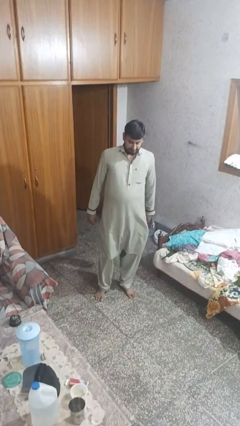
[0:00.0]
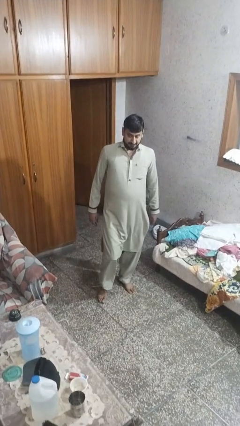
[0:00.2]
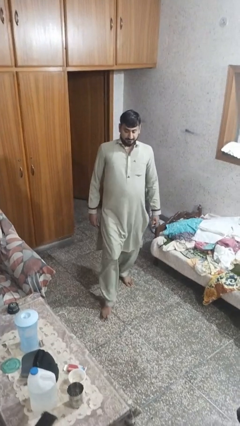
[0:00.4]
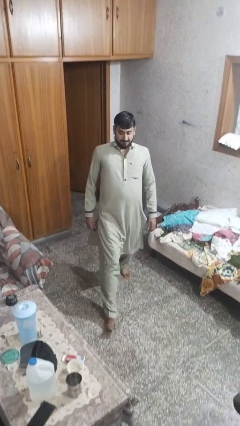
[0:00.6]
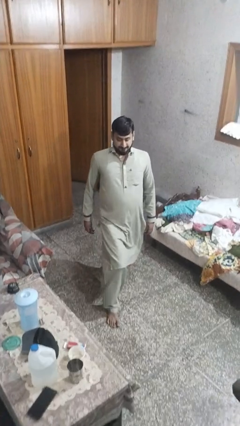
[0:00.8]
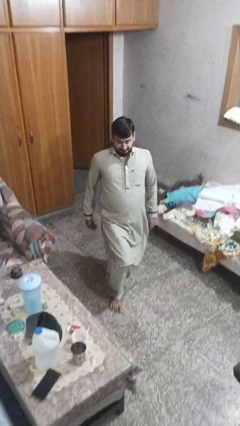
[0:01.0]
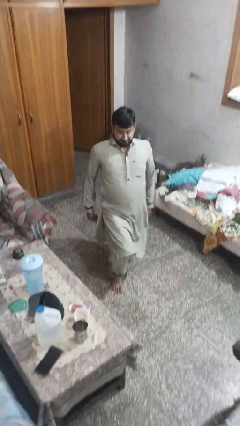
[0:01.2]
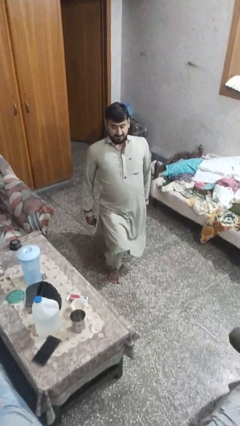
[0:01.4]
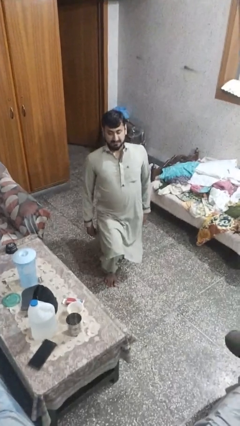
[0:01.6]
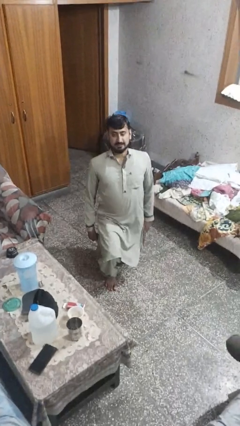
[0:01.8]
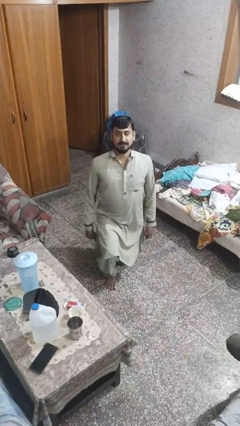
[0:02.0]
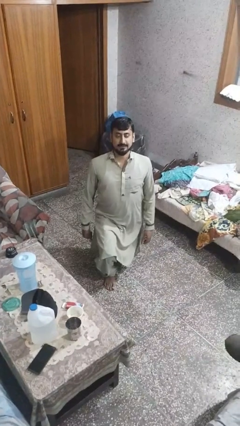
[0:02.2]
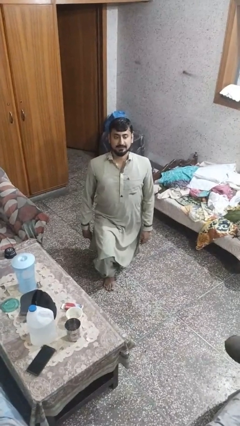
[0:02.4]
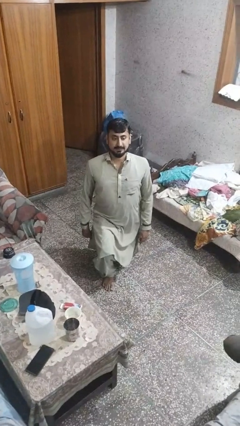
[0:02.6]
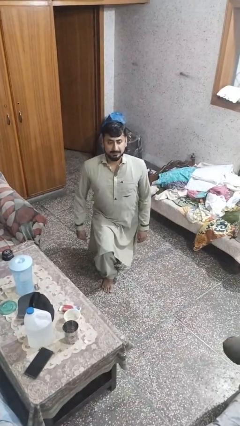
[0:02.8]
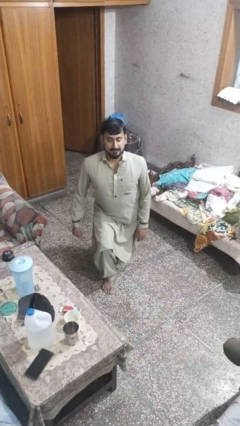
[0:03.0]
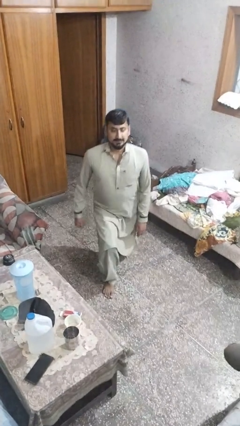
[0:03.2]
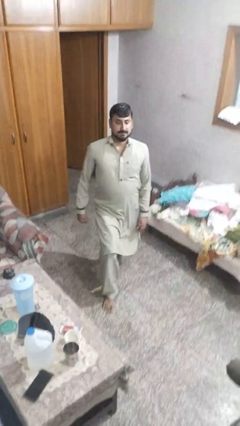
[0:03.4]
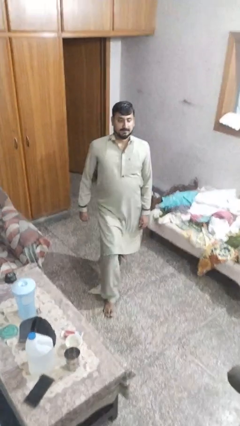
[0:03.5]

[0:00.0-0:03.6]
person exercises with lunges

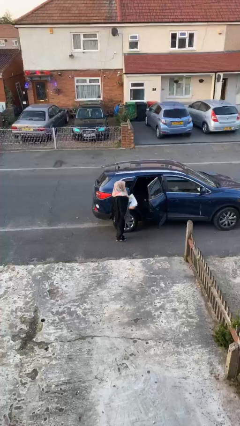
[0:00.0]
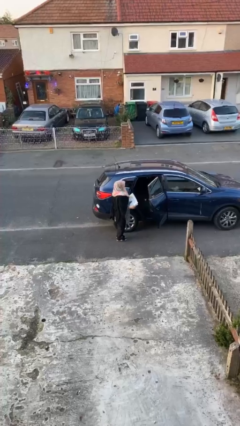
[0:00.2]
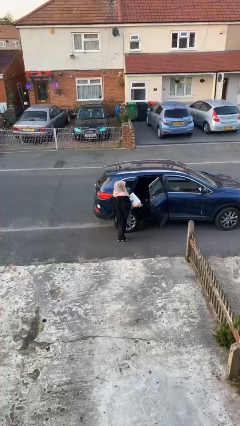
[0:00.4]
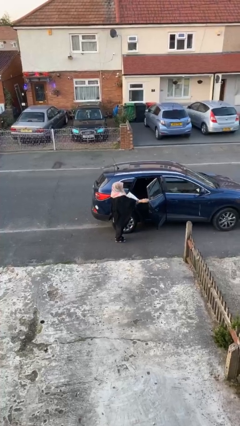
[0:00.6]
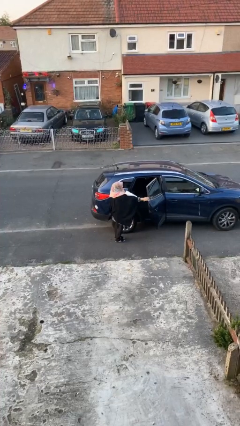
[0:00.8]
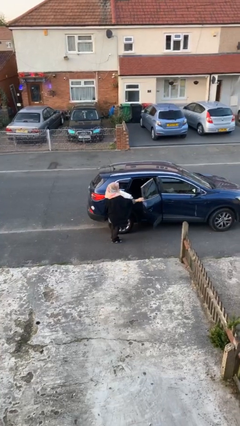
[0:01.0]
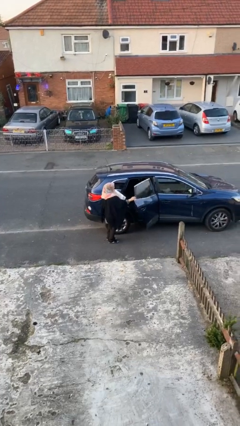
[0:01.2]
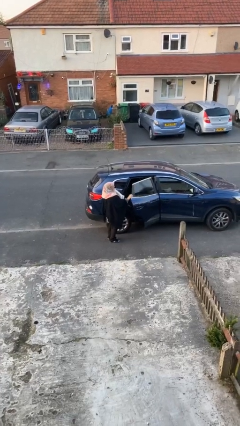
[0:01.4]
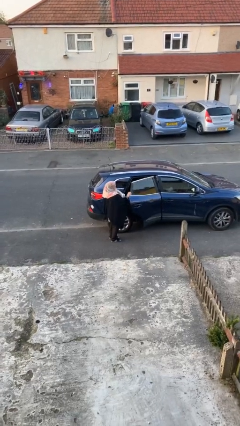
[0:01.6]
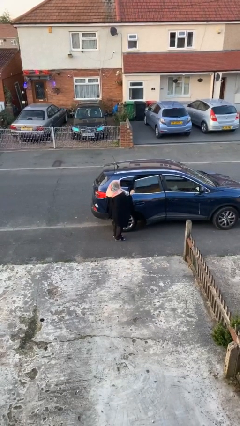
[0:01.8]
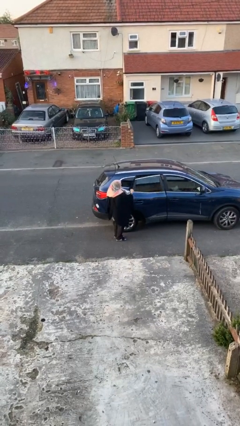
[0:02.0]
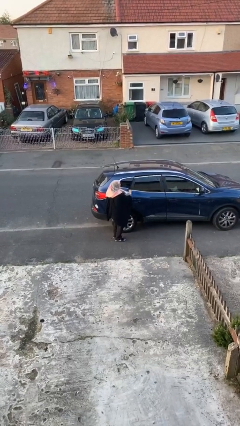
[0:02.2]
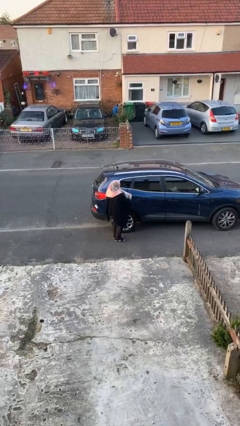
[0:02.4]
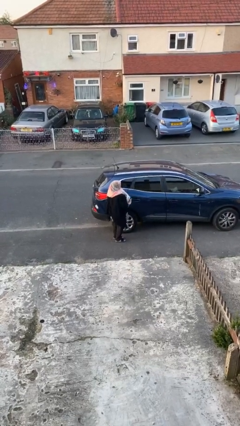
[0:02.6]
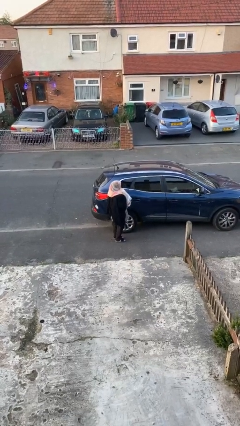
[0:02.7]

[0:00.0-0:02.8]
person closes car door

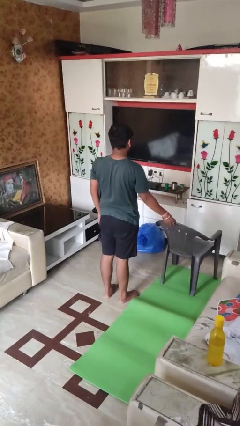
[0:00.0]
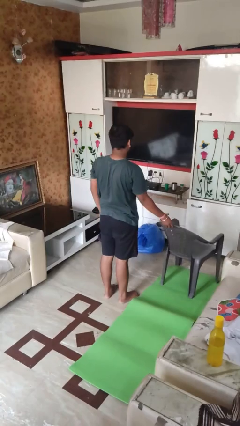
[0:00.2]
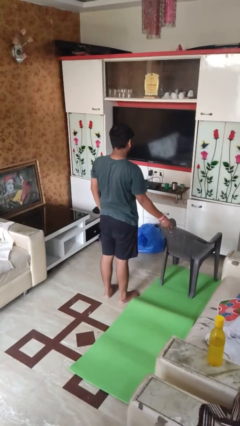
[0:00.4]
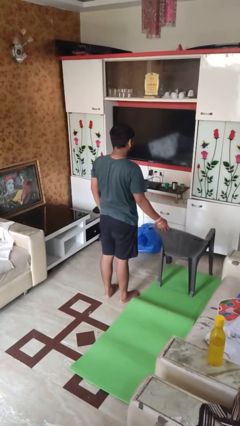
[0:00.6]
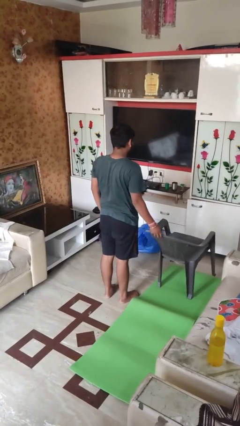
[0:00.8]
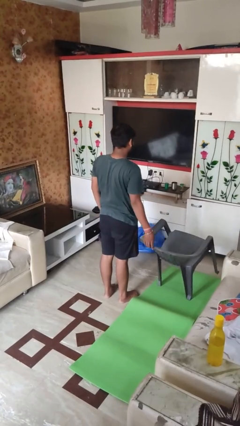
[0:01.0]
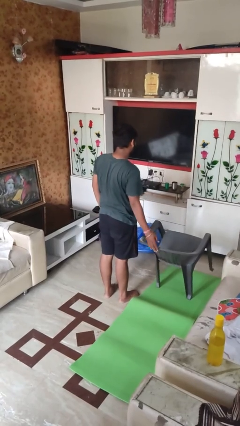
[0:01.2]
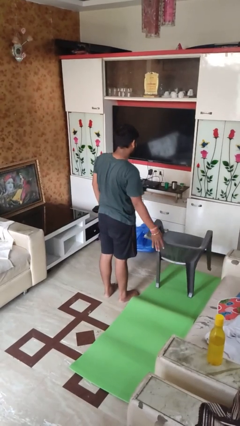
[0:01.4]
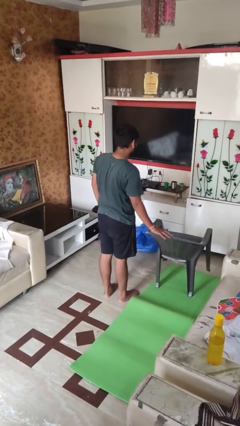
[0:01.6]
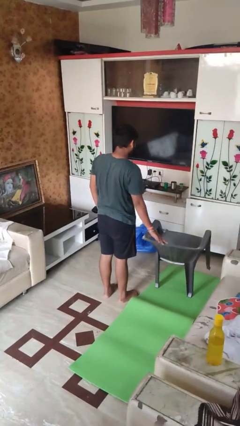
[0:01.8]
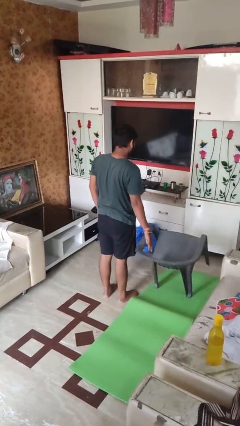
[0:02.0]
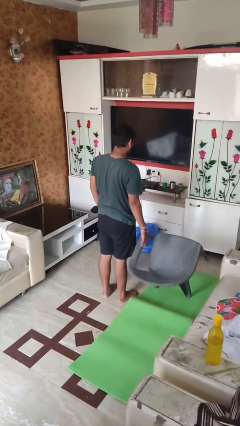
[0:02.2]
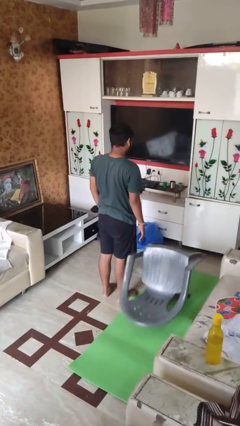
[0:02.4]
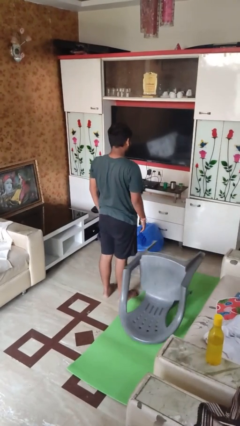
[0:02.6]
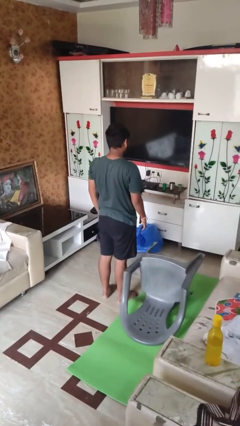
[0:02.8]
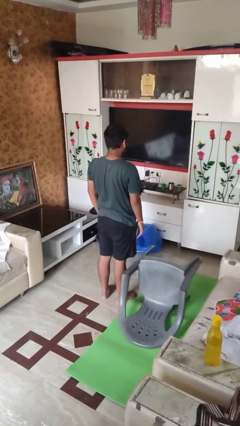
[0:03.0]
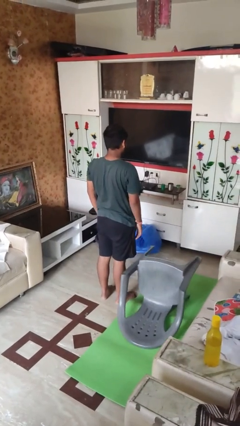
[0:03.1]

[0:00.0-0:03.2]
person knocks over furniture

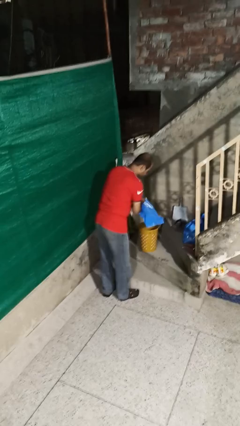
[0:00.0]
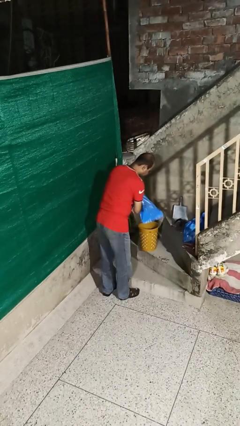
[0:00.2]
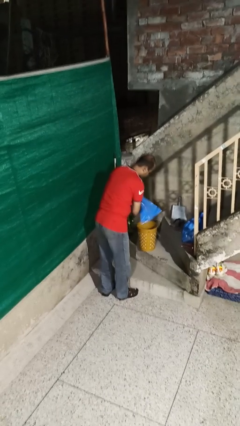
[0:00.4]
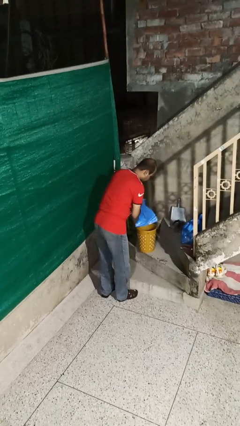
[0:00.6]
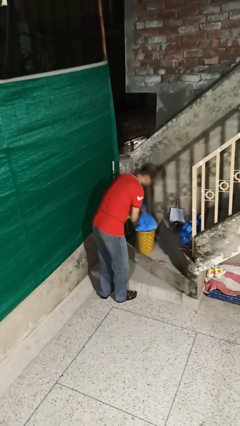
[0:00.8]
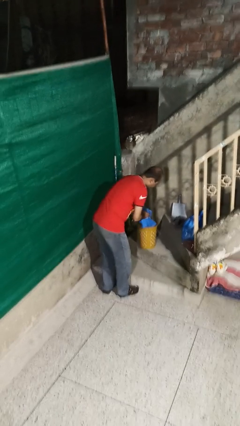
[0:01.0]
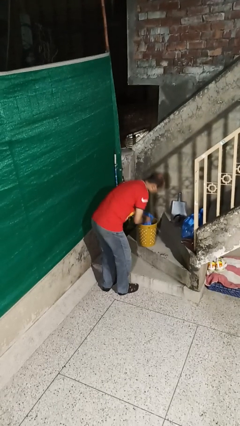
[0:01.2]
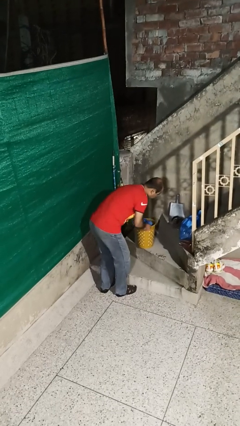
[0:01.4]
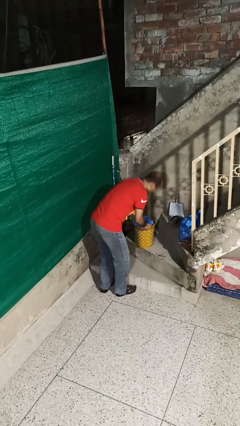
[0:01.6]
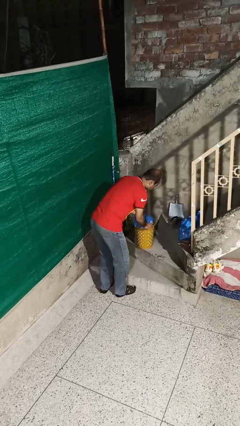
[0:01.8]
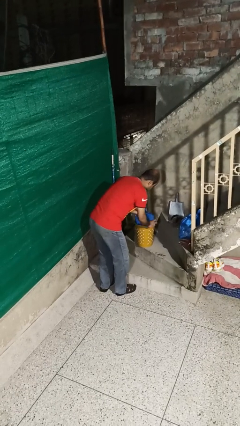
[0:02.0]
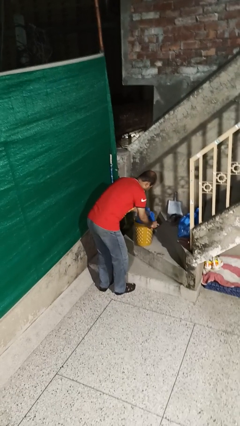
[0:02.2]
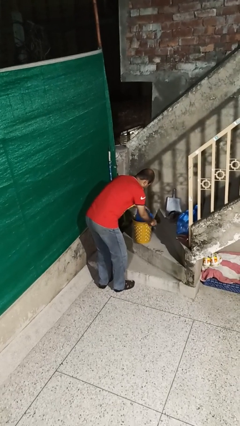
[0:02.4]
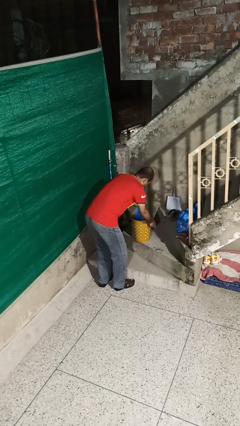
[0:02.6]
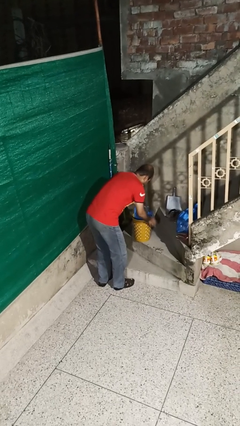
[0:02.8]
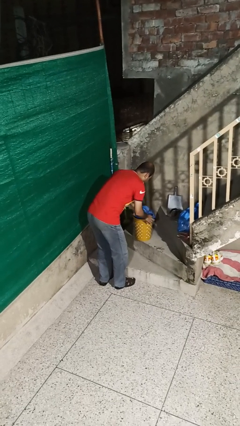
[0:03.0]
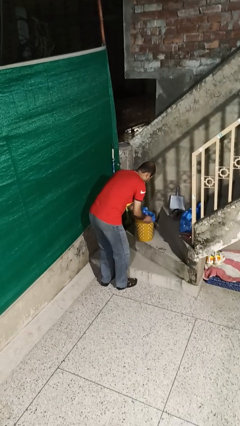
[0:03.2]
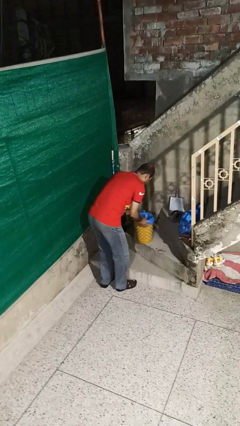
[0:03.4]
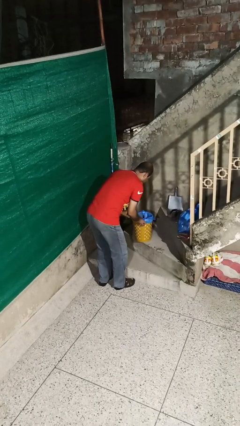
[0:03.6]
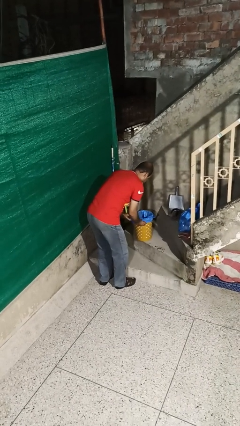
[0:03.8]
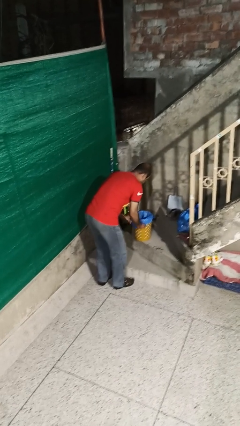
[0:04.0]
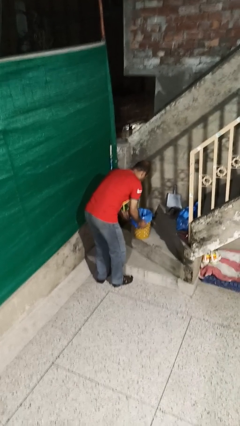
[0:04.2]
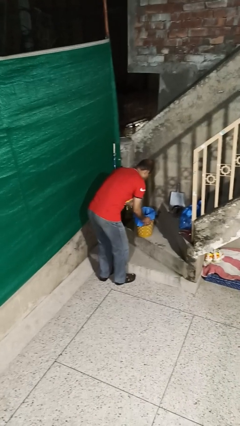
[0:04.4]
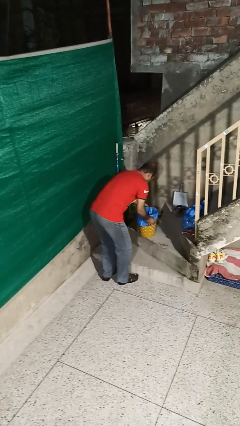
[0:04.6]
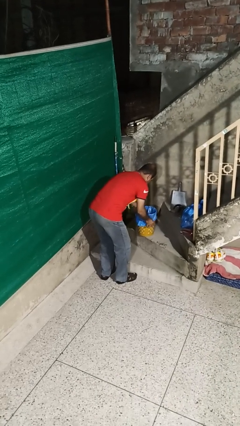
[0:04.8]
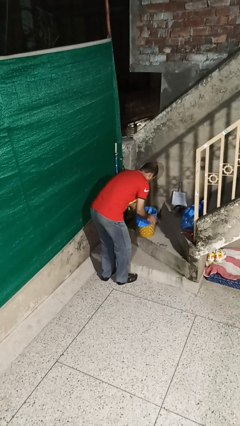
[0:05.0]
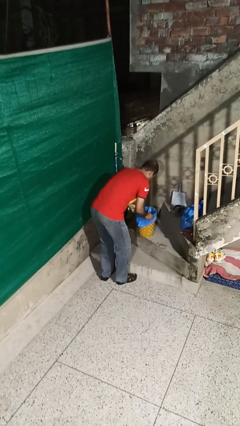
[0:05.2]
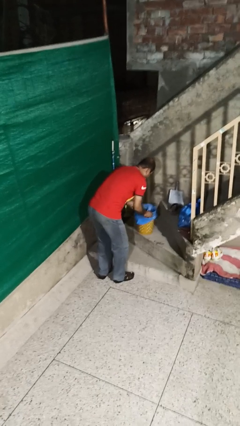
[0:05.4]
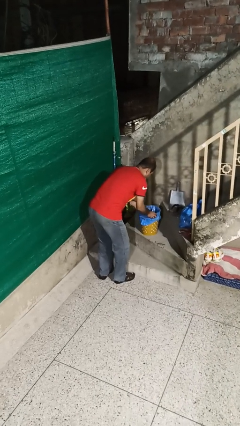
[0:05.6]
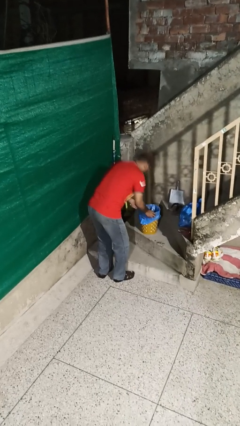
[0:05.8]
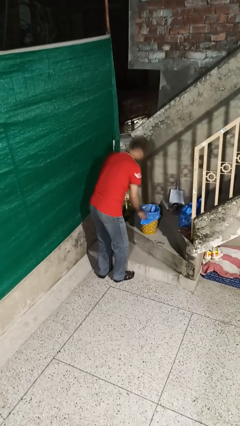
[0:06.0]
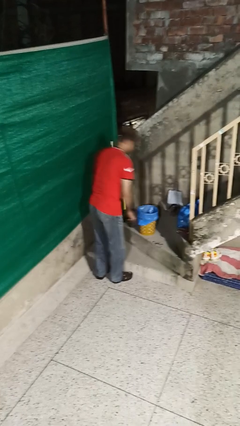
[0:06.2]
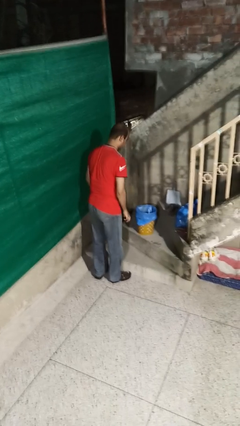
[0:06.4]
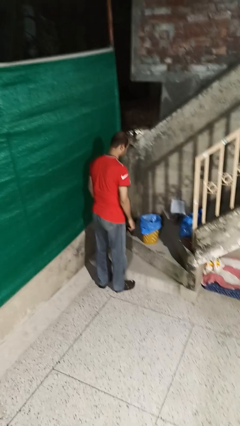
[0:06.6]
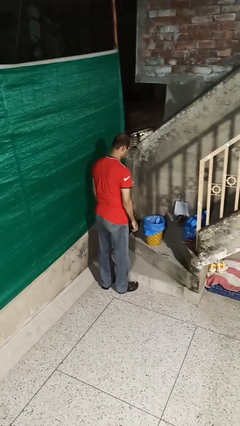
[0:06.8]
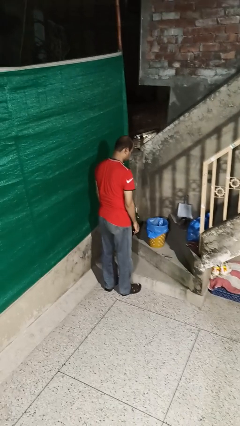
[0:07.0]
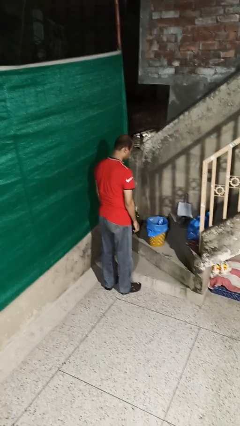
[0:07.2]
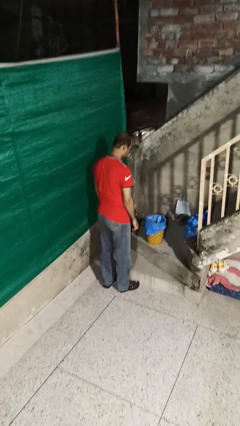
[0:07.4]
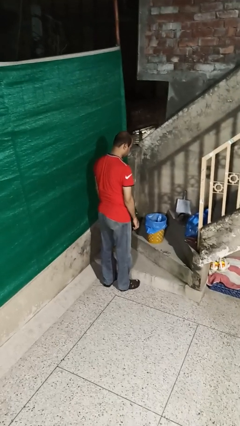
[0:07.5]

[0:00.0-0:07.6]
person inserts trashbag into trashcan
